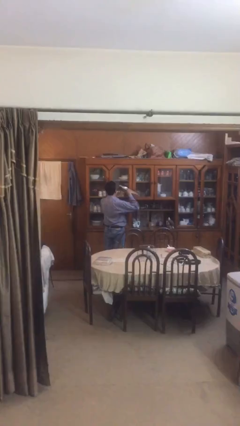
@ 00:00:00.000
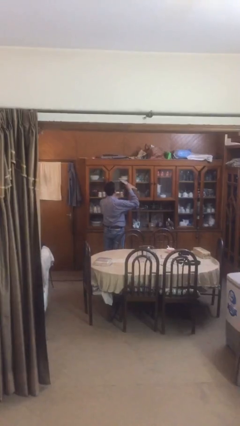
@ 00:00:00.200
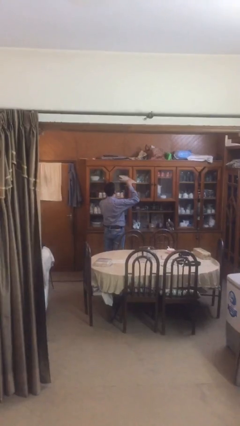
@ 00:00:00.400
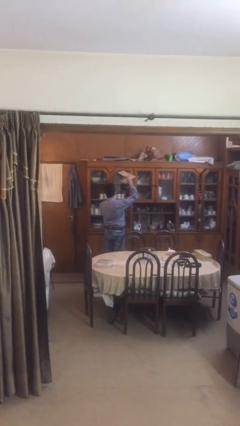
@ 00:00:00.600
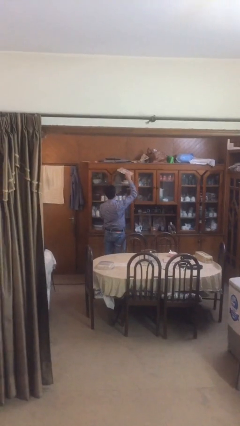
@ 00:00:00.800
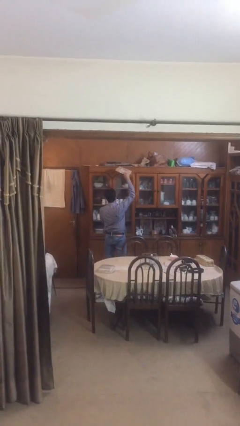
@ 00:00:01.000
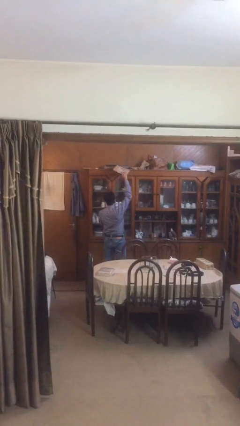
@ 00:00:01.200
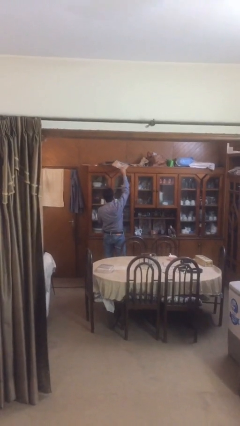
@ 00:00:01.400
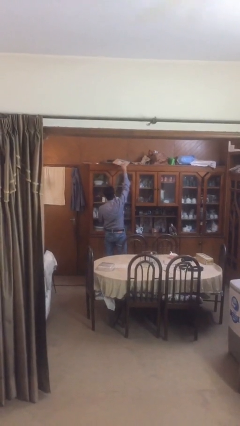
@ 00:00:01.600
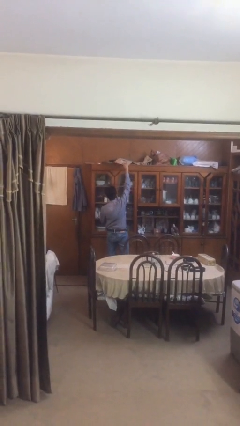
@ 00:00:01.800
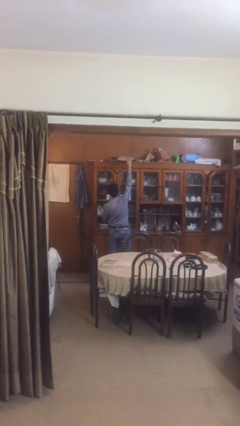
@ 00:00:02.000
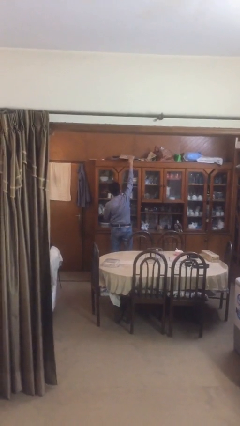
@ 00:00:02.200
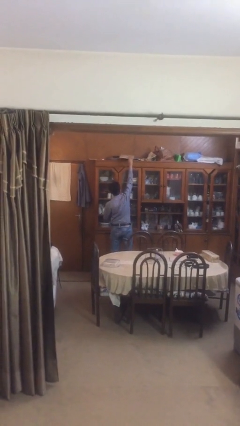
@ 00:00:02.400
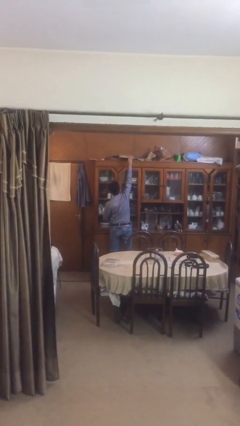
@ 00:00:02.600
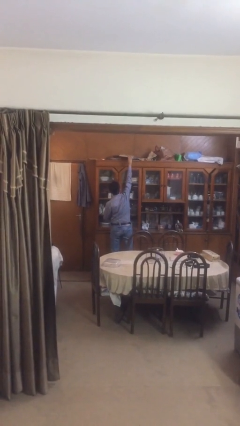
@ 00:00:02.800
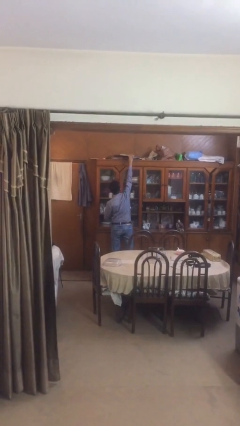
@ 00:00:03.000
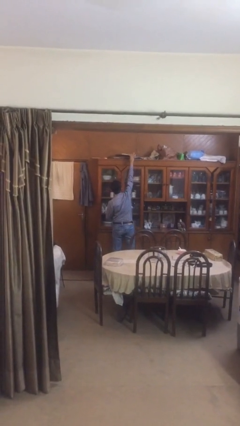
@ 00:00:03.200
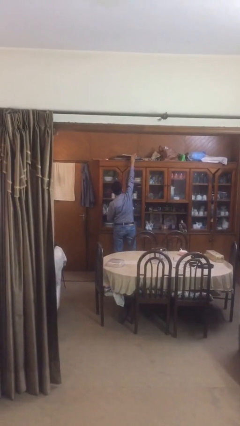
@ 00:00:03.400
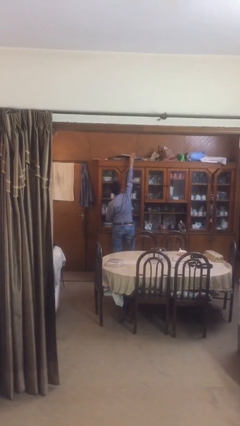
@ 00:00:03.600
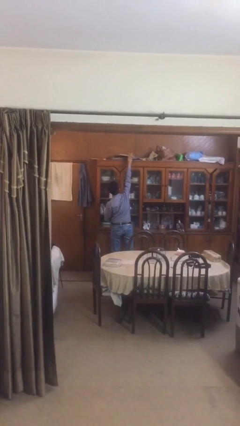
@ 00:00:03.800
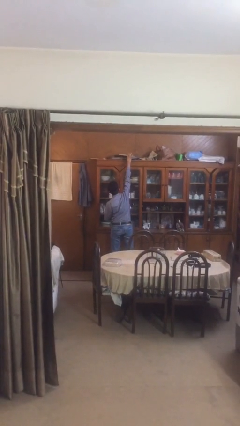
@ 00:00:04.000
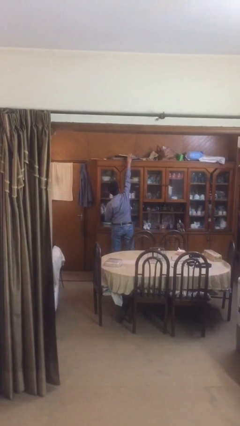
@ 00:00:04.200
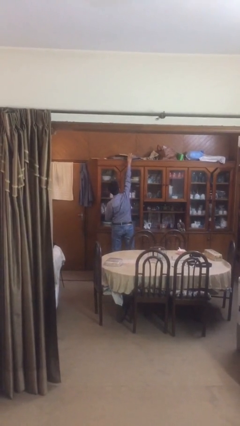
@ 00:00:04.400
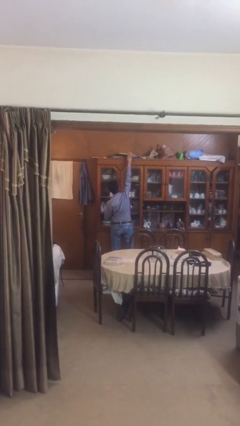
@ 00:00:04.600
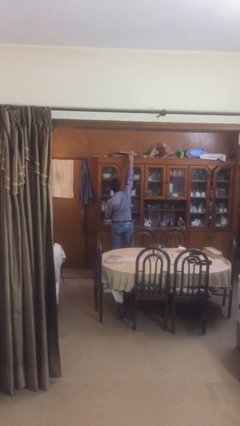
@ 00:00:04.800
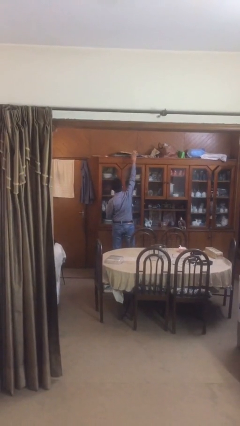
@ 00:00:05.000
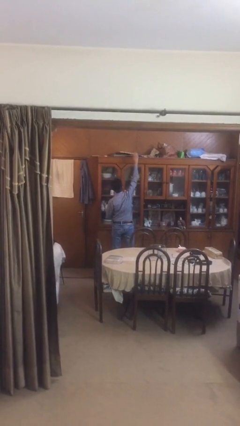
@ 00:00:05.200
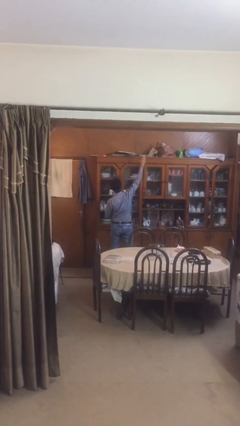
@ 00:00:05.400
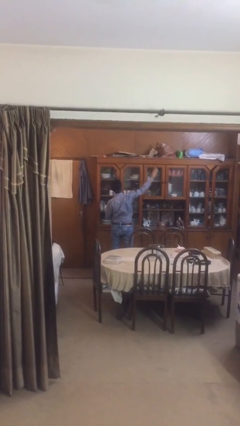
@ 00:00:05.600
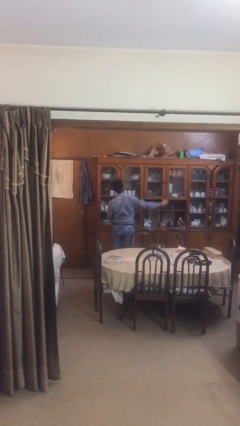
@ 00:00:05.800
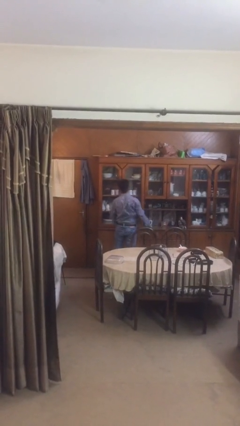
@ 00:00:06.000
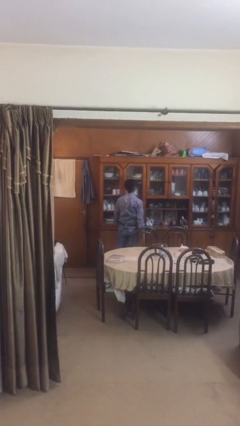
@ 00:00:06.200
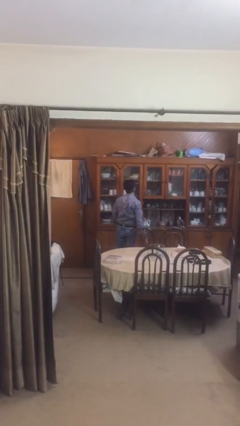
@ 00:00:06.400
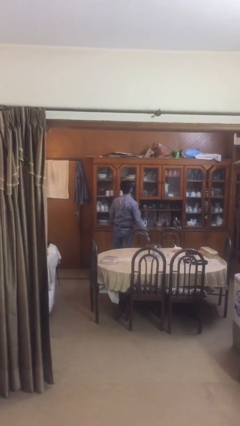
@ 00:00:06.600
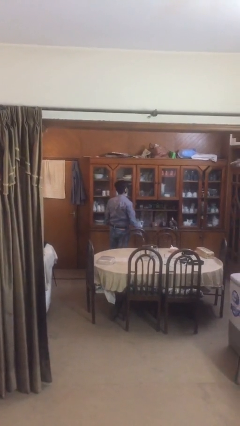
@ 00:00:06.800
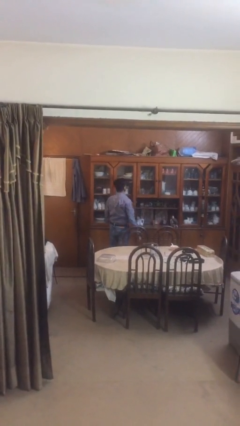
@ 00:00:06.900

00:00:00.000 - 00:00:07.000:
person puts down object on shelf

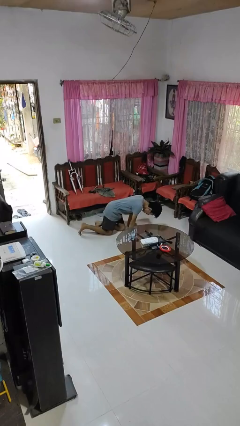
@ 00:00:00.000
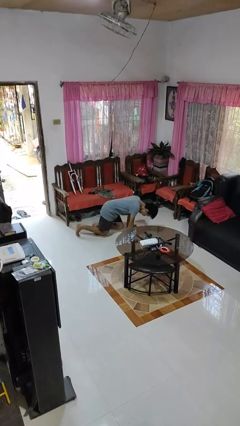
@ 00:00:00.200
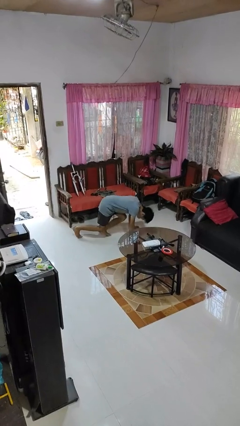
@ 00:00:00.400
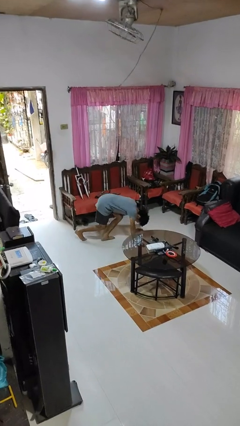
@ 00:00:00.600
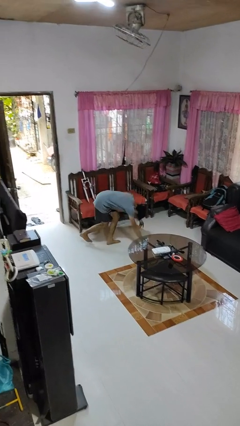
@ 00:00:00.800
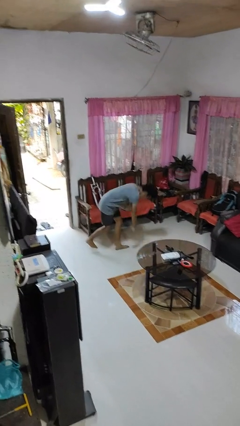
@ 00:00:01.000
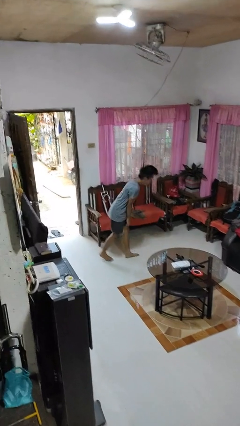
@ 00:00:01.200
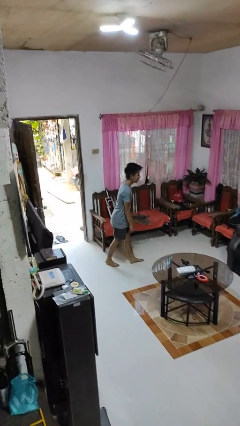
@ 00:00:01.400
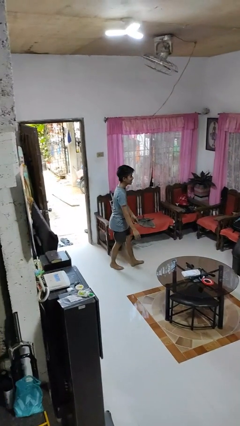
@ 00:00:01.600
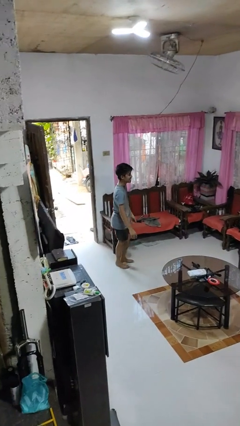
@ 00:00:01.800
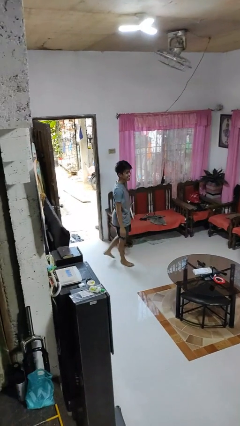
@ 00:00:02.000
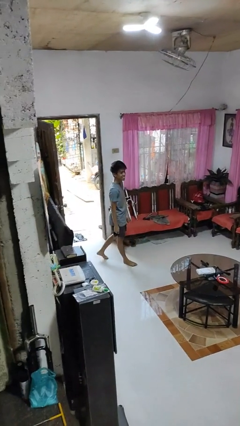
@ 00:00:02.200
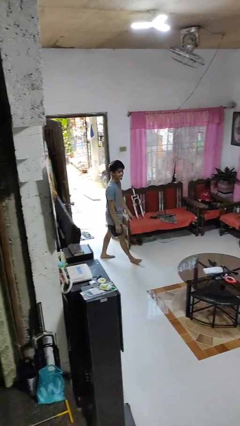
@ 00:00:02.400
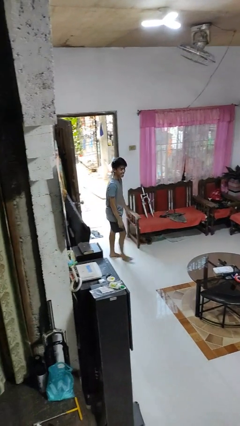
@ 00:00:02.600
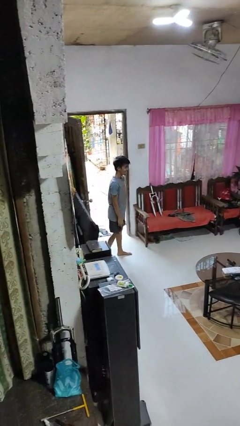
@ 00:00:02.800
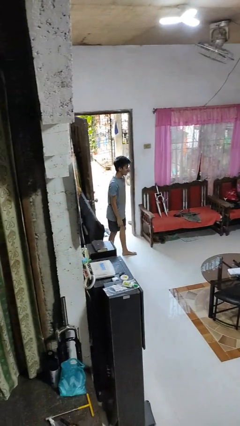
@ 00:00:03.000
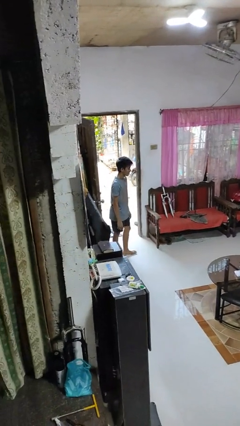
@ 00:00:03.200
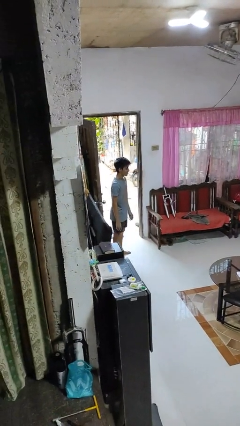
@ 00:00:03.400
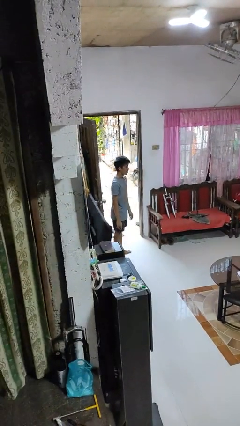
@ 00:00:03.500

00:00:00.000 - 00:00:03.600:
person stands up from floor

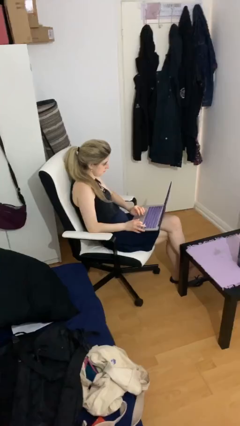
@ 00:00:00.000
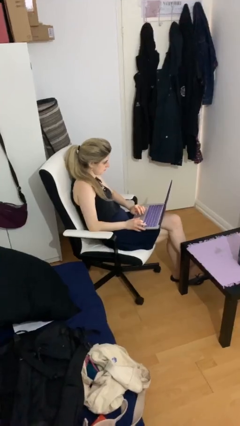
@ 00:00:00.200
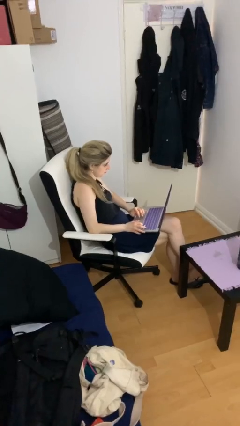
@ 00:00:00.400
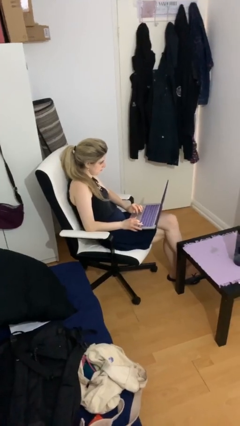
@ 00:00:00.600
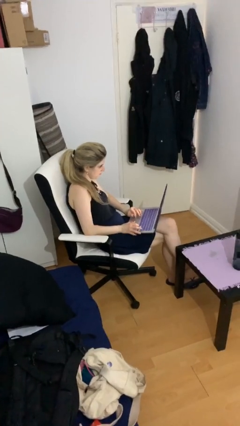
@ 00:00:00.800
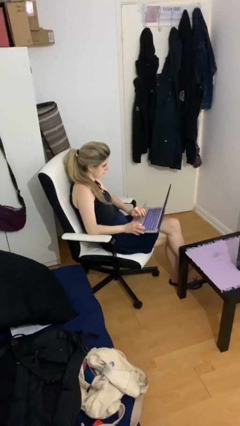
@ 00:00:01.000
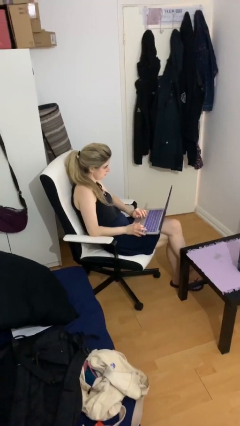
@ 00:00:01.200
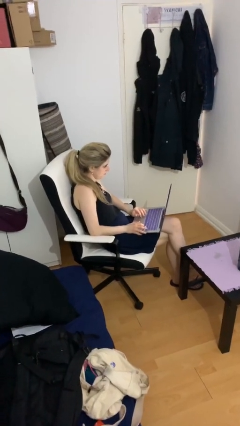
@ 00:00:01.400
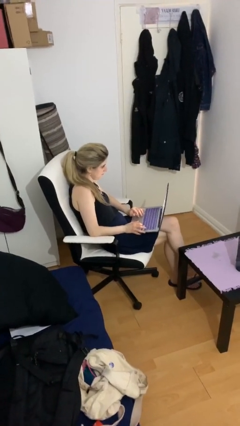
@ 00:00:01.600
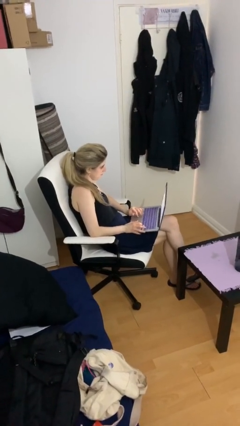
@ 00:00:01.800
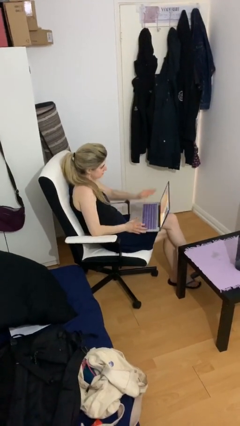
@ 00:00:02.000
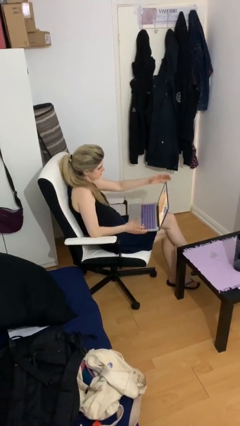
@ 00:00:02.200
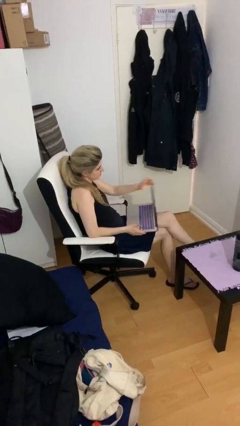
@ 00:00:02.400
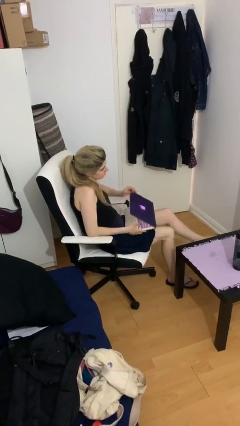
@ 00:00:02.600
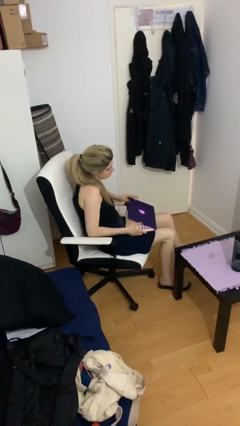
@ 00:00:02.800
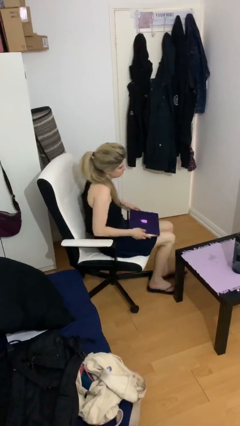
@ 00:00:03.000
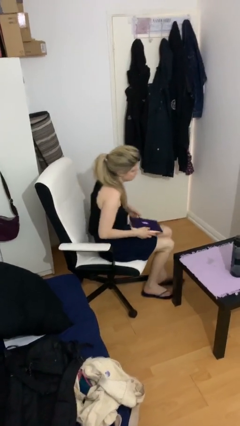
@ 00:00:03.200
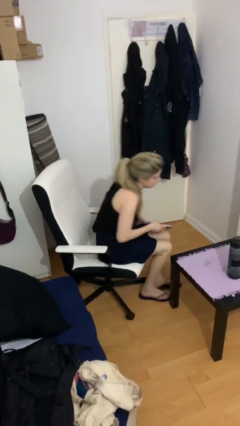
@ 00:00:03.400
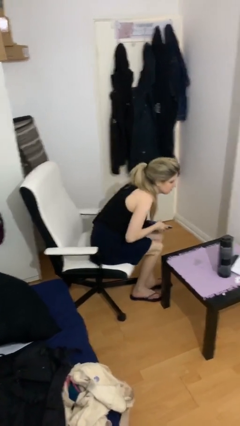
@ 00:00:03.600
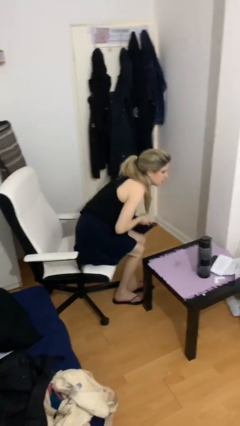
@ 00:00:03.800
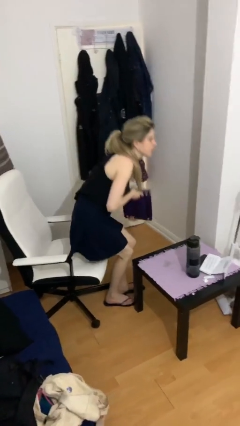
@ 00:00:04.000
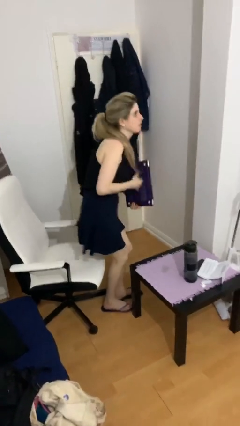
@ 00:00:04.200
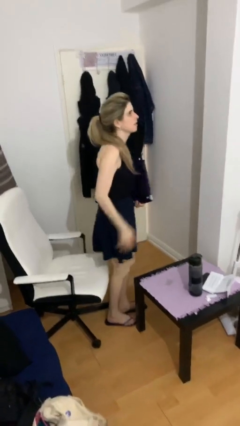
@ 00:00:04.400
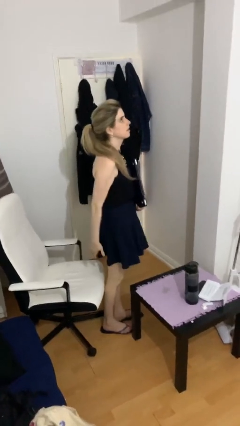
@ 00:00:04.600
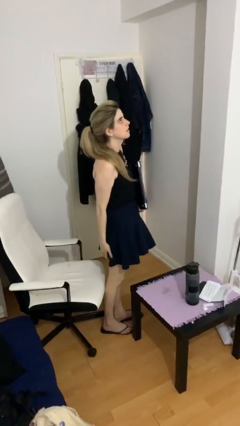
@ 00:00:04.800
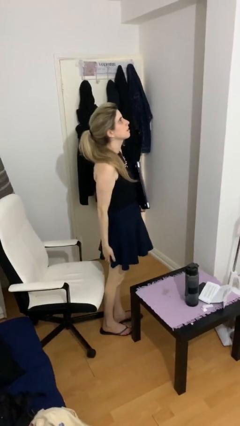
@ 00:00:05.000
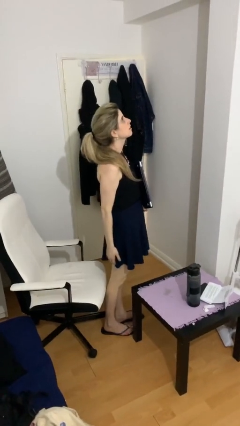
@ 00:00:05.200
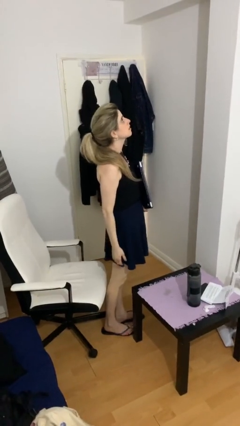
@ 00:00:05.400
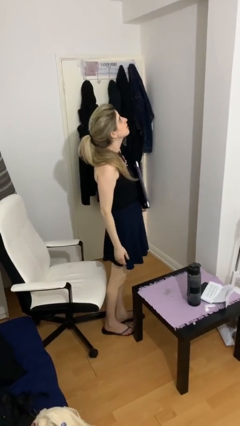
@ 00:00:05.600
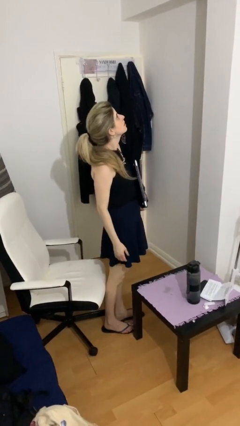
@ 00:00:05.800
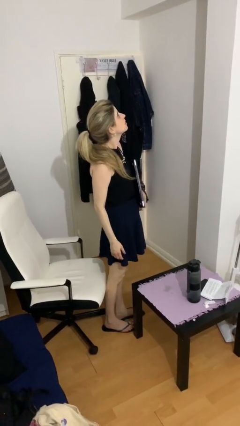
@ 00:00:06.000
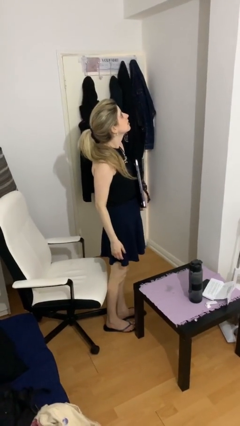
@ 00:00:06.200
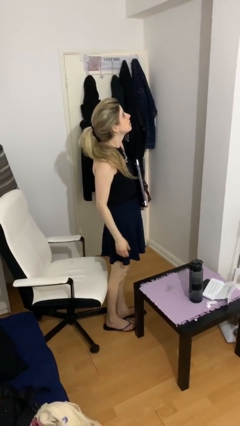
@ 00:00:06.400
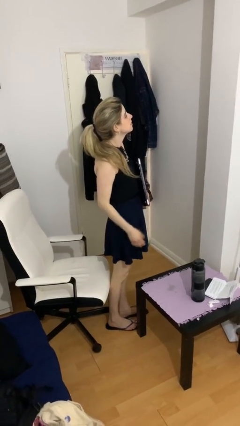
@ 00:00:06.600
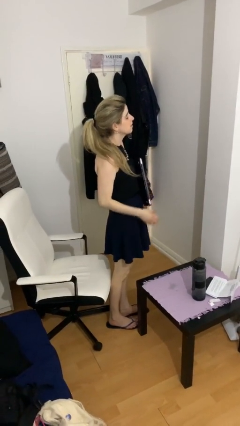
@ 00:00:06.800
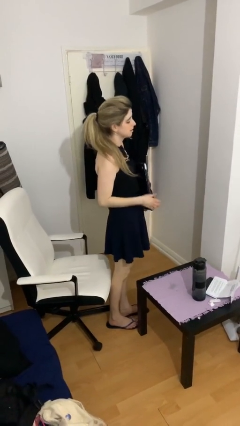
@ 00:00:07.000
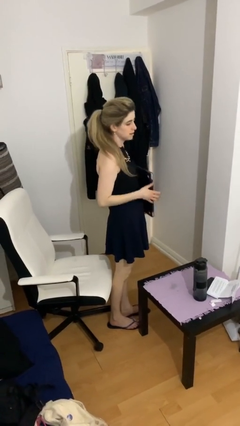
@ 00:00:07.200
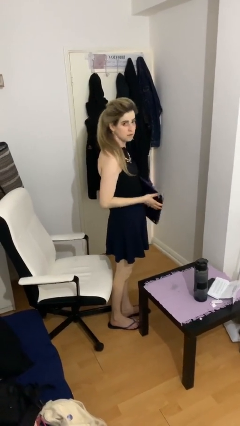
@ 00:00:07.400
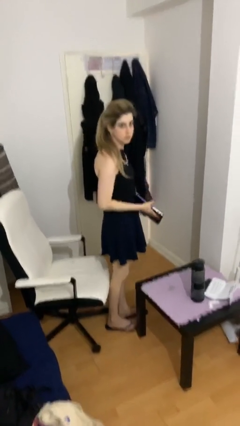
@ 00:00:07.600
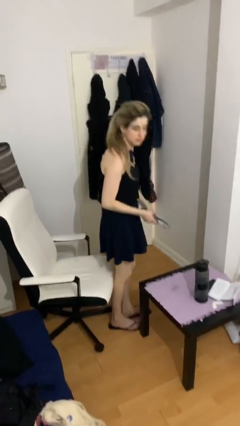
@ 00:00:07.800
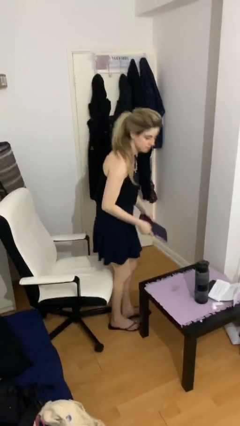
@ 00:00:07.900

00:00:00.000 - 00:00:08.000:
person stands up
